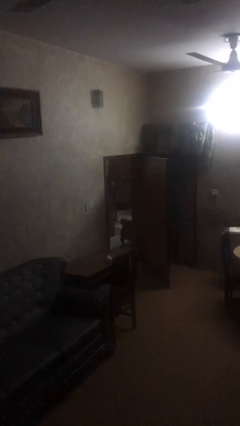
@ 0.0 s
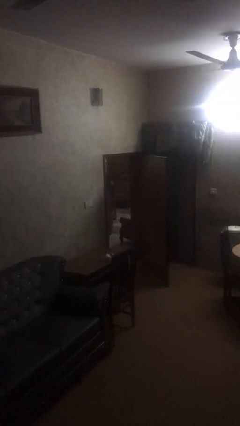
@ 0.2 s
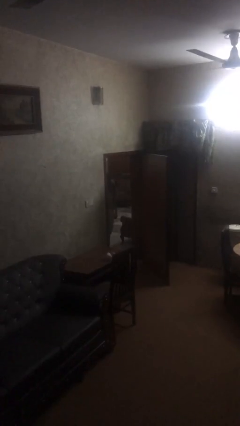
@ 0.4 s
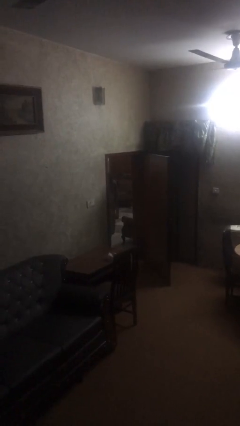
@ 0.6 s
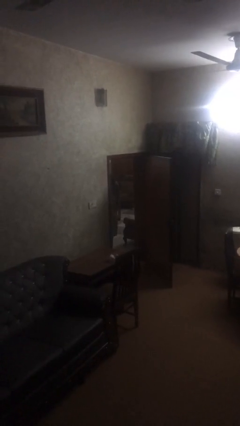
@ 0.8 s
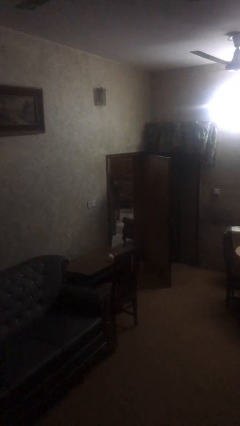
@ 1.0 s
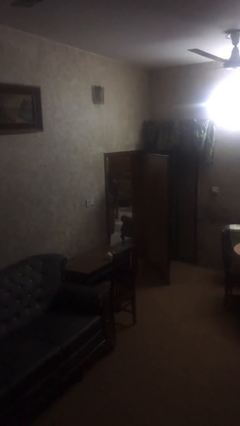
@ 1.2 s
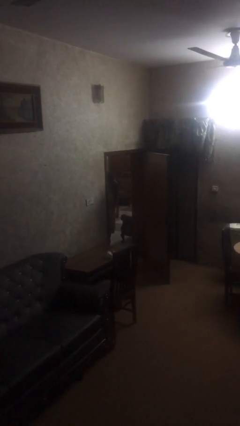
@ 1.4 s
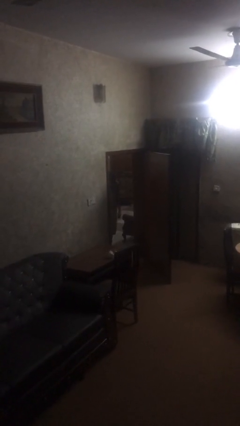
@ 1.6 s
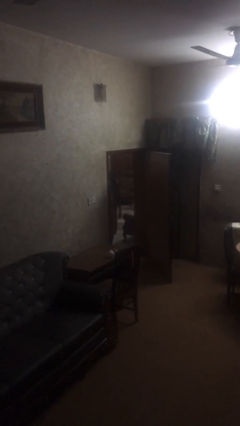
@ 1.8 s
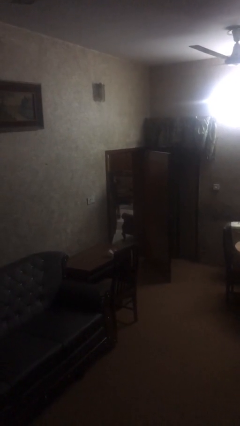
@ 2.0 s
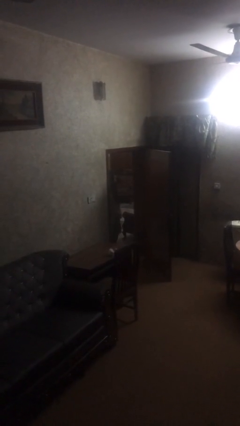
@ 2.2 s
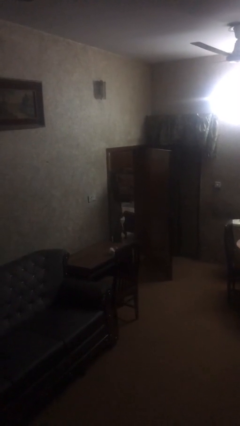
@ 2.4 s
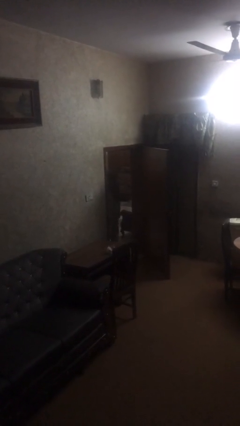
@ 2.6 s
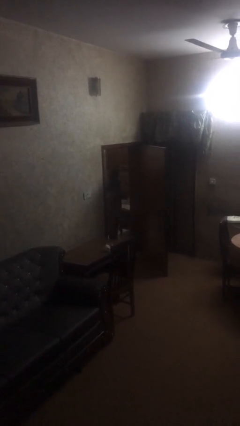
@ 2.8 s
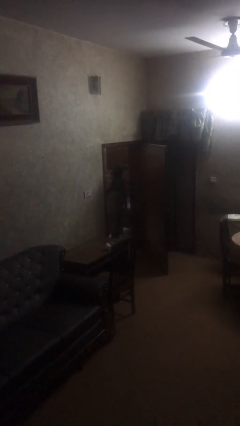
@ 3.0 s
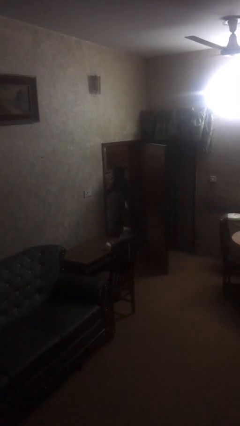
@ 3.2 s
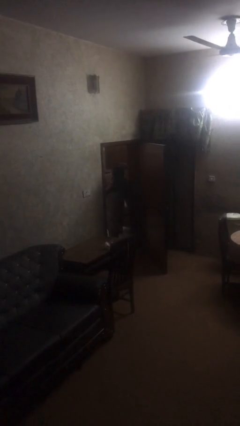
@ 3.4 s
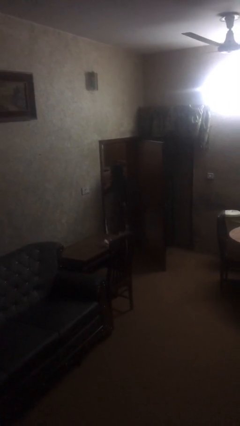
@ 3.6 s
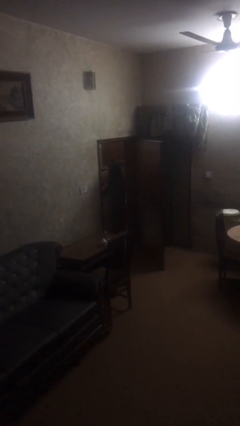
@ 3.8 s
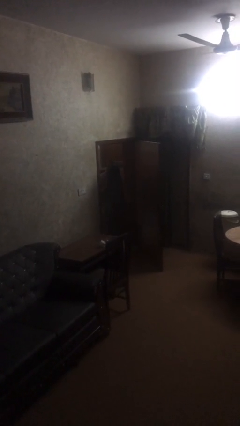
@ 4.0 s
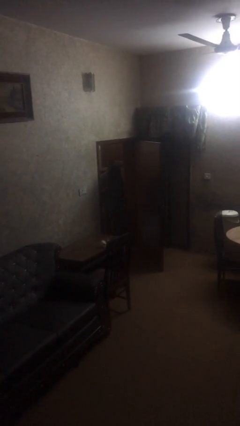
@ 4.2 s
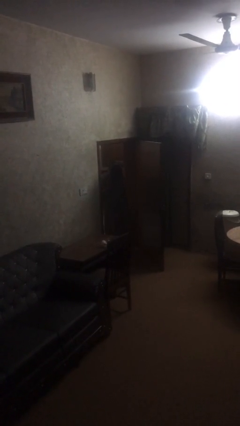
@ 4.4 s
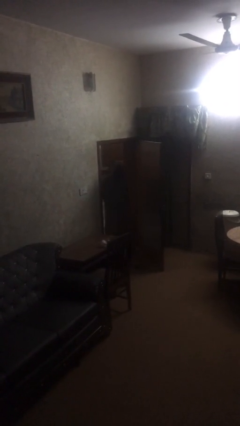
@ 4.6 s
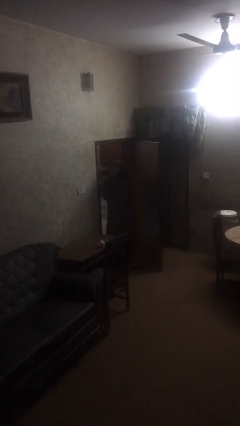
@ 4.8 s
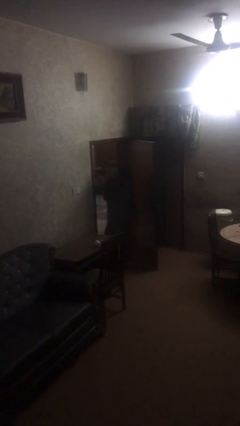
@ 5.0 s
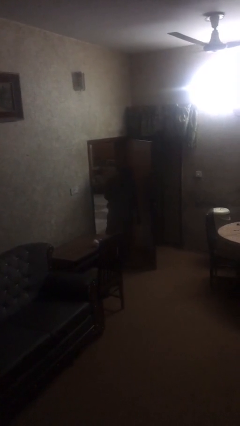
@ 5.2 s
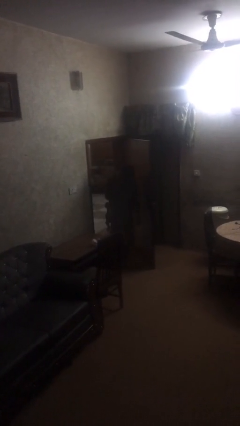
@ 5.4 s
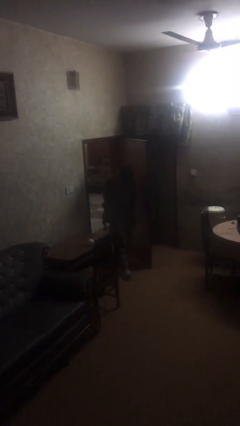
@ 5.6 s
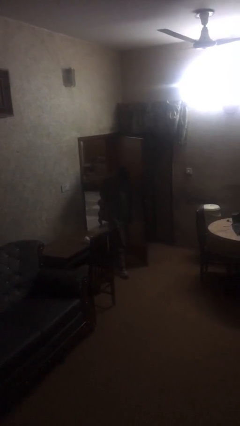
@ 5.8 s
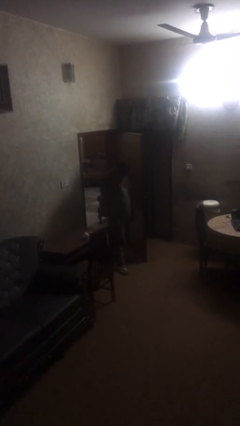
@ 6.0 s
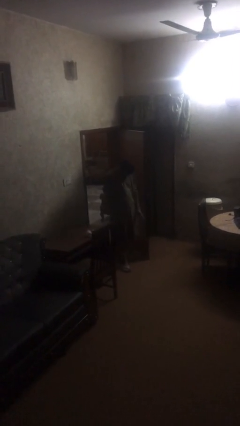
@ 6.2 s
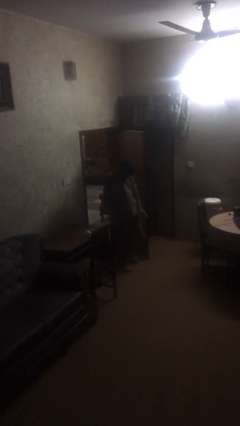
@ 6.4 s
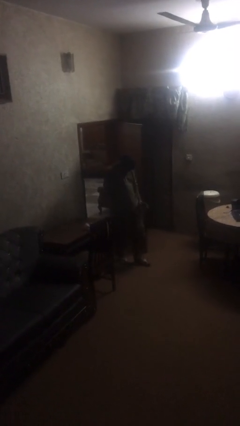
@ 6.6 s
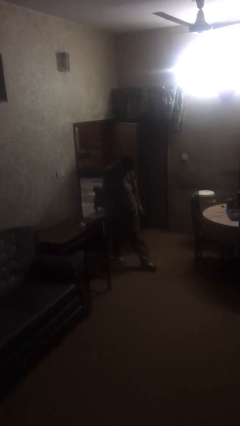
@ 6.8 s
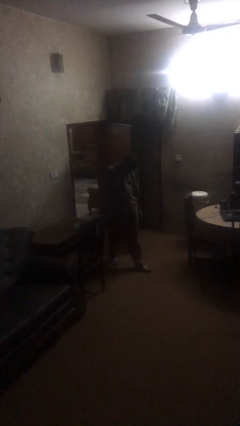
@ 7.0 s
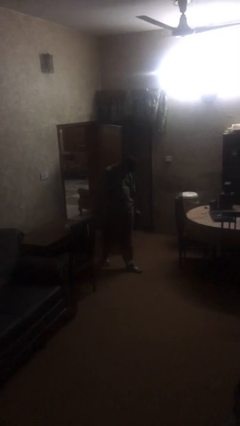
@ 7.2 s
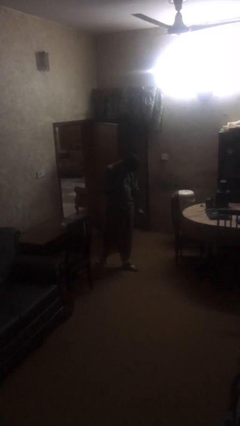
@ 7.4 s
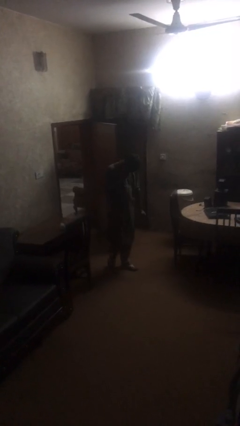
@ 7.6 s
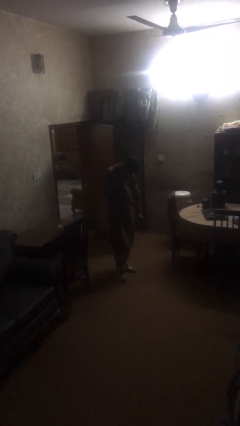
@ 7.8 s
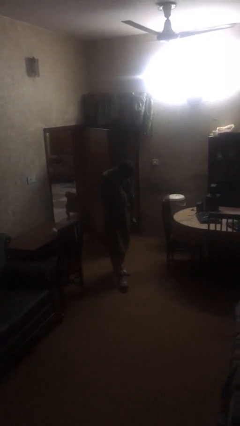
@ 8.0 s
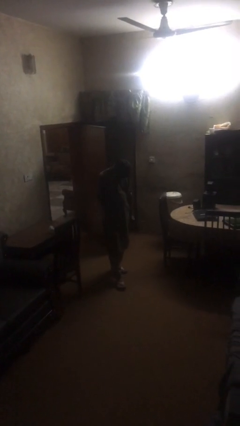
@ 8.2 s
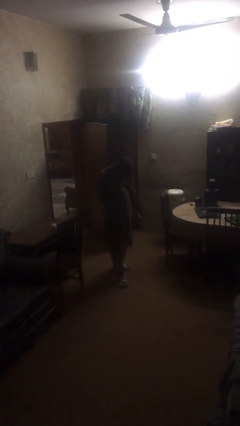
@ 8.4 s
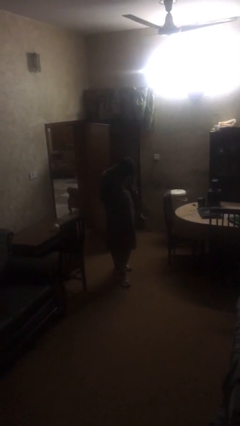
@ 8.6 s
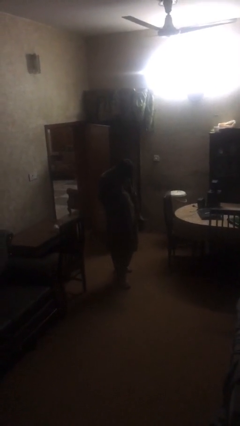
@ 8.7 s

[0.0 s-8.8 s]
person enters scene through structure

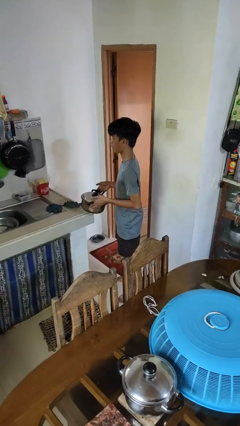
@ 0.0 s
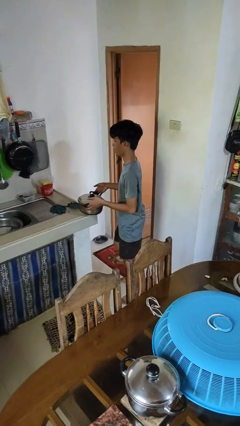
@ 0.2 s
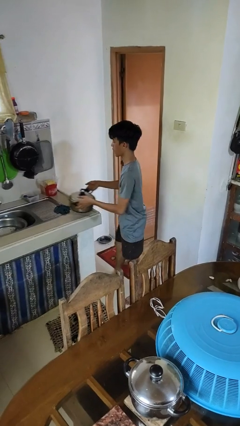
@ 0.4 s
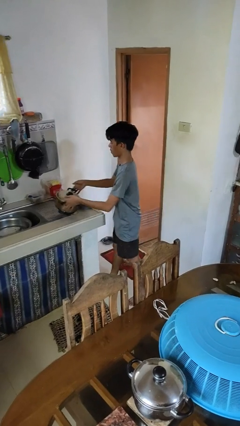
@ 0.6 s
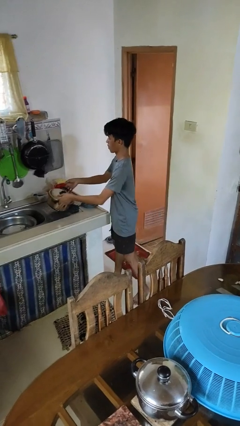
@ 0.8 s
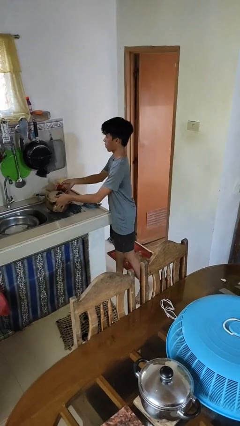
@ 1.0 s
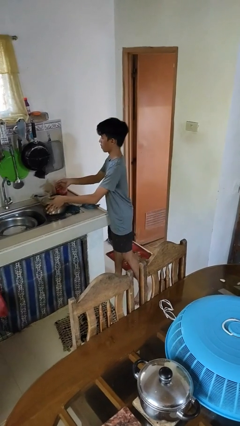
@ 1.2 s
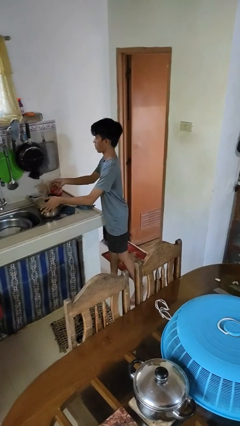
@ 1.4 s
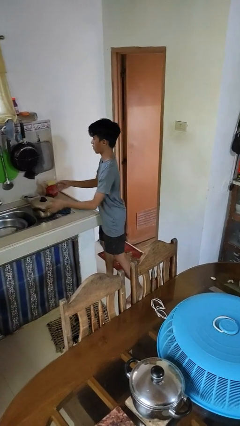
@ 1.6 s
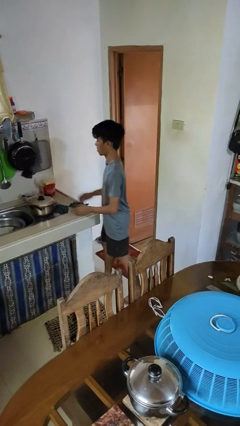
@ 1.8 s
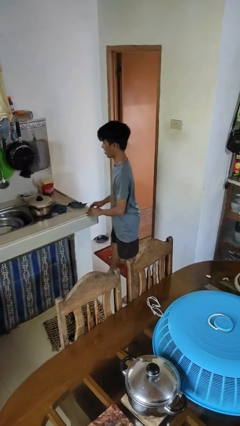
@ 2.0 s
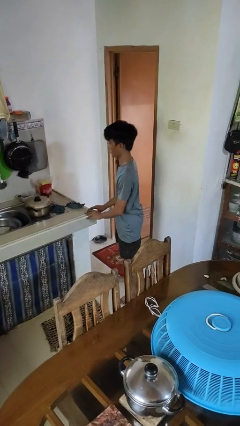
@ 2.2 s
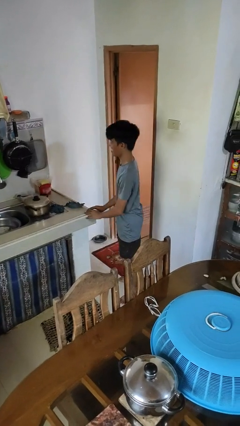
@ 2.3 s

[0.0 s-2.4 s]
person puts down object on countertop

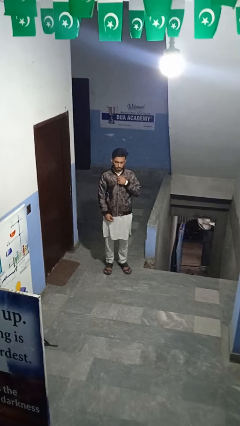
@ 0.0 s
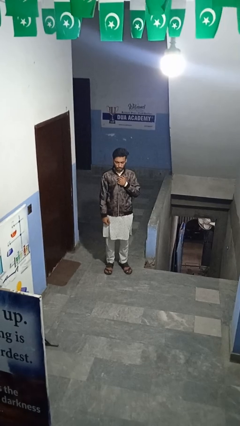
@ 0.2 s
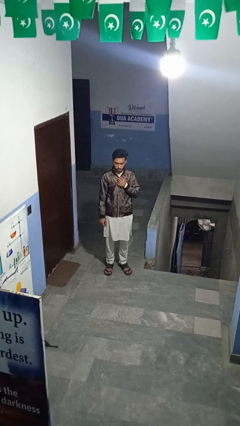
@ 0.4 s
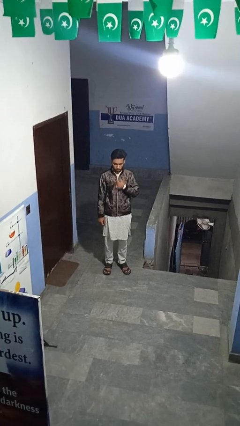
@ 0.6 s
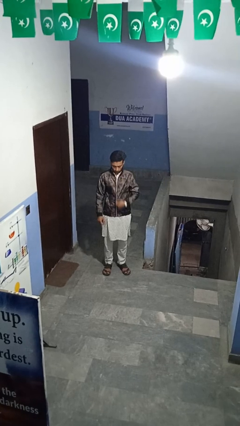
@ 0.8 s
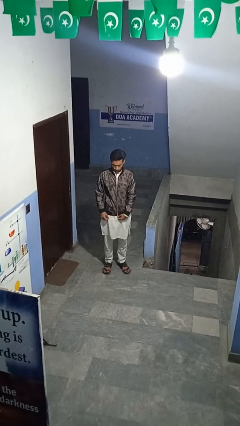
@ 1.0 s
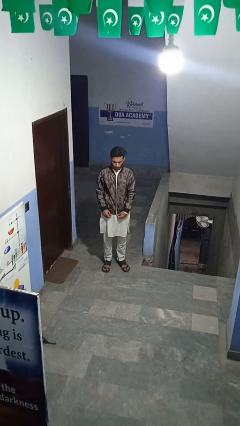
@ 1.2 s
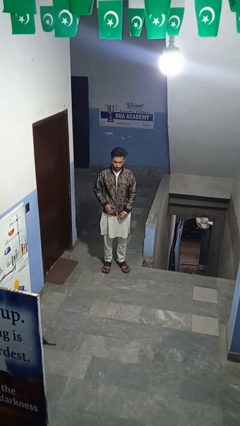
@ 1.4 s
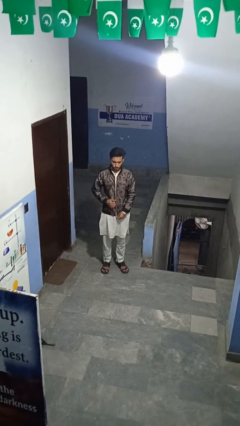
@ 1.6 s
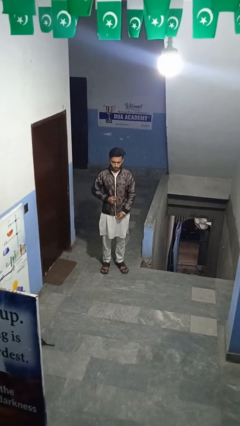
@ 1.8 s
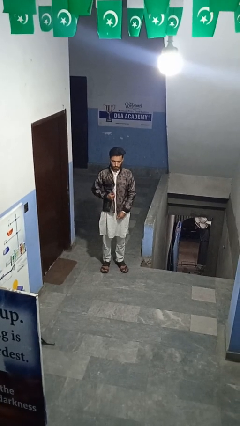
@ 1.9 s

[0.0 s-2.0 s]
person unzips jacket

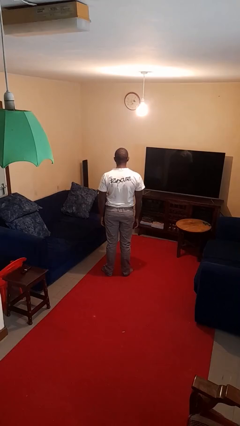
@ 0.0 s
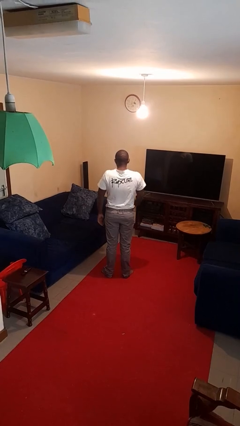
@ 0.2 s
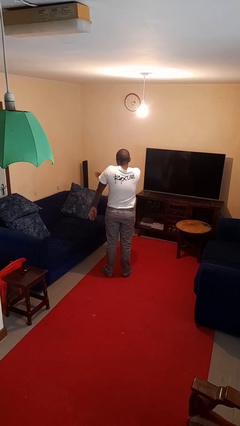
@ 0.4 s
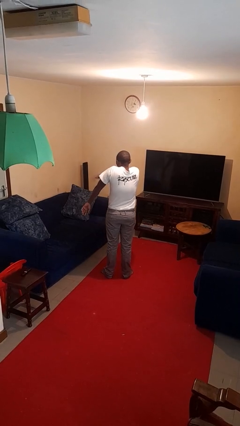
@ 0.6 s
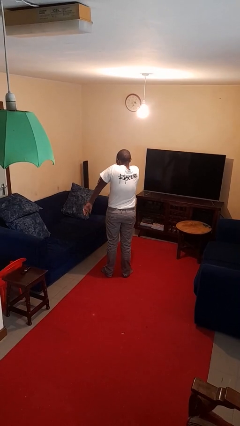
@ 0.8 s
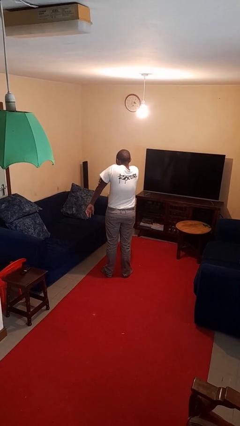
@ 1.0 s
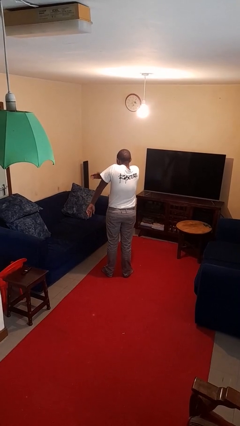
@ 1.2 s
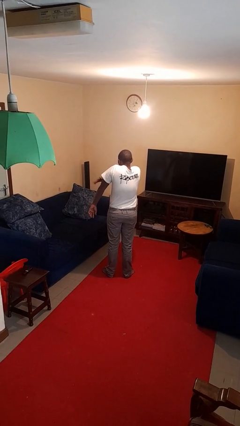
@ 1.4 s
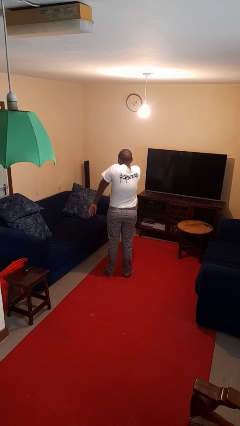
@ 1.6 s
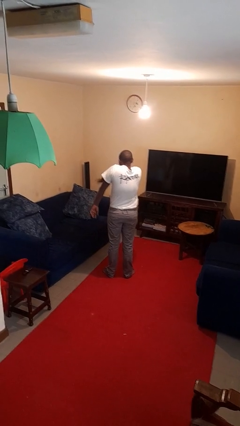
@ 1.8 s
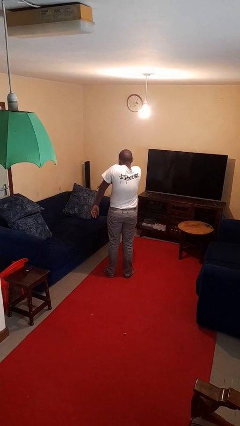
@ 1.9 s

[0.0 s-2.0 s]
person swats bug

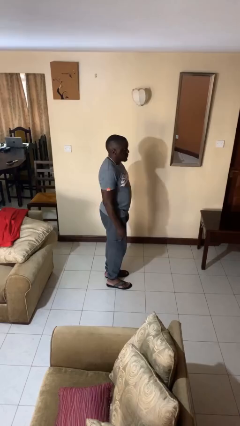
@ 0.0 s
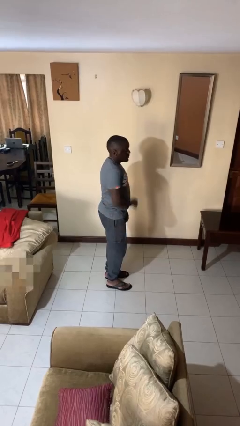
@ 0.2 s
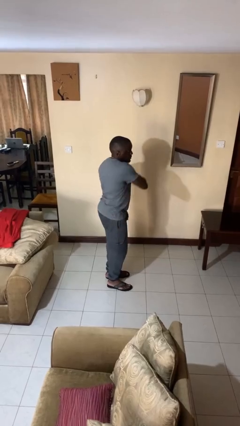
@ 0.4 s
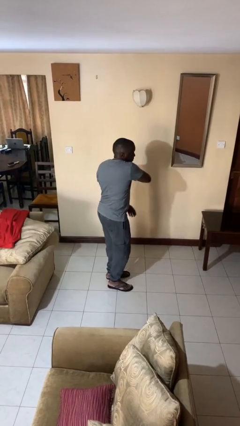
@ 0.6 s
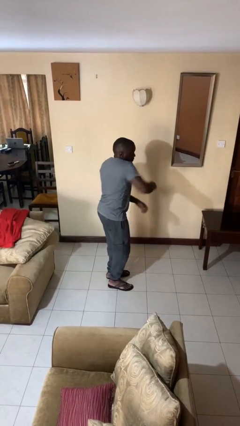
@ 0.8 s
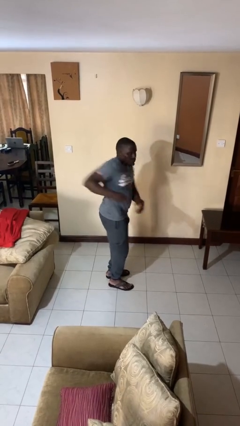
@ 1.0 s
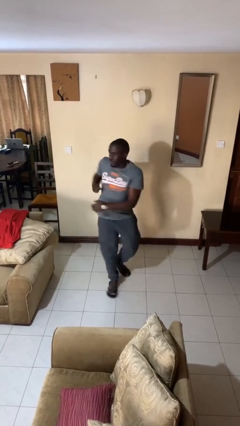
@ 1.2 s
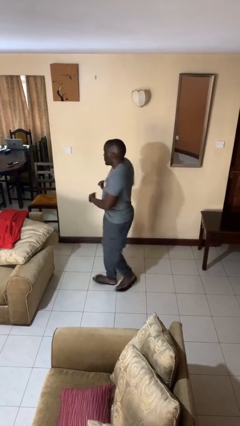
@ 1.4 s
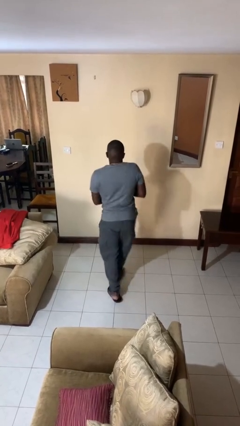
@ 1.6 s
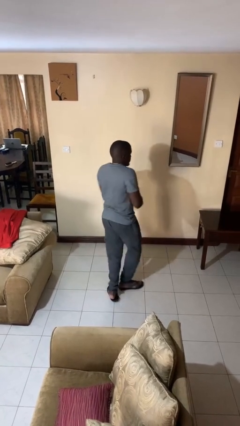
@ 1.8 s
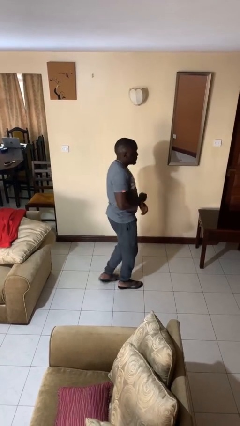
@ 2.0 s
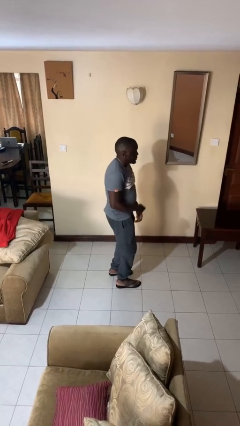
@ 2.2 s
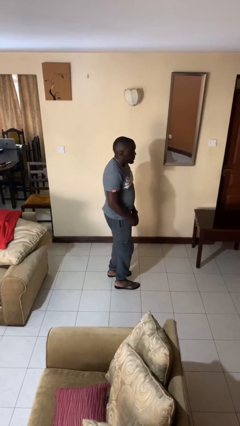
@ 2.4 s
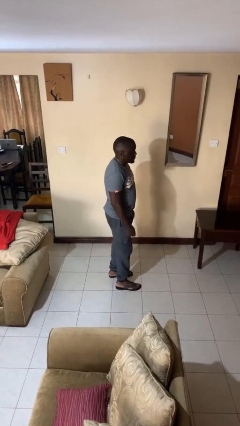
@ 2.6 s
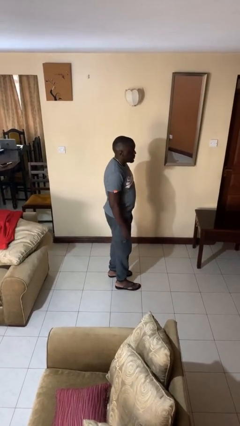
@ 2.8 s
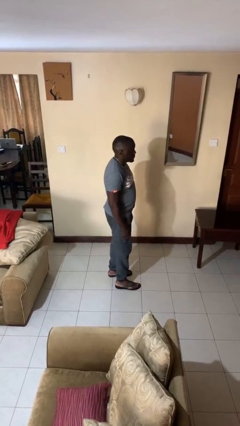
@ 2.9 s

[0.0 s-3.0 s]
person twirls
